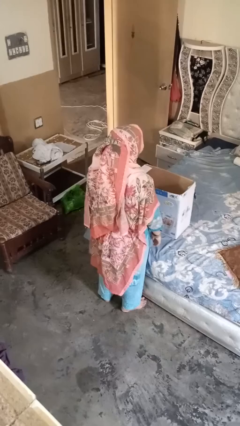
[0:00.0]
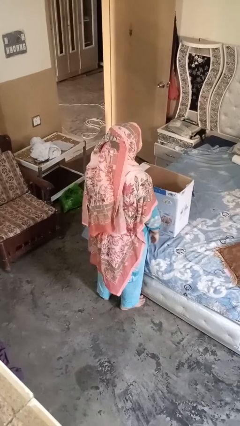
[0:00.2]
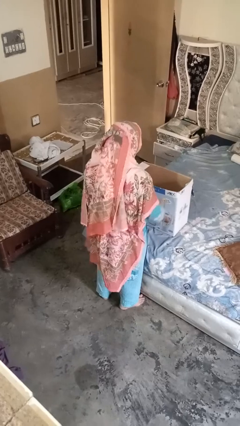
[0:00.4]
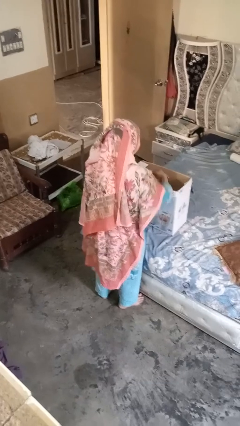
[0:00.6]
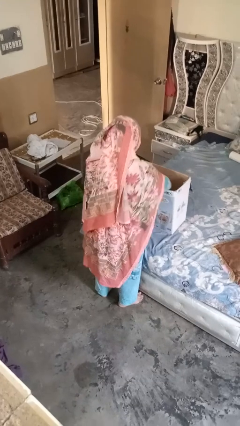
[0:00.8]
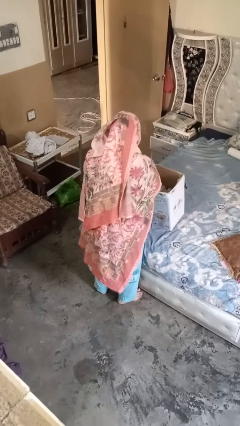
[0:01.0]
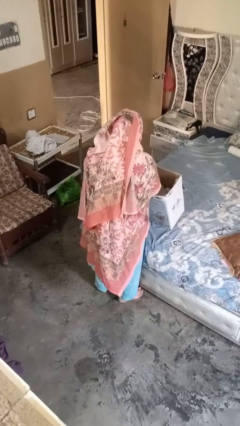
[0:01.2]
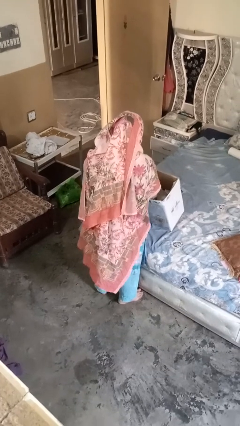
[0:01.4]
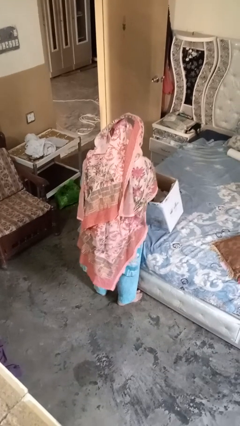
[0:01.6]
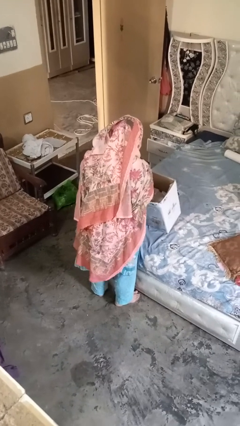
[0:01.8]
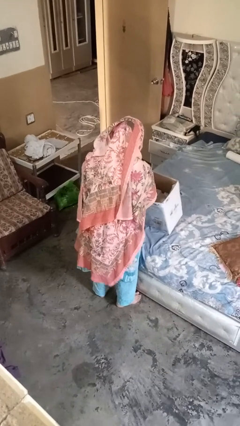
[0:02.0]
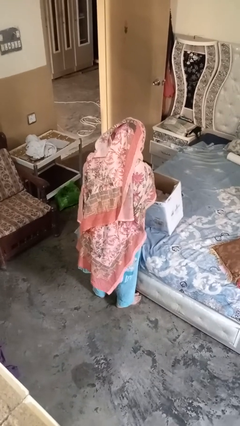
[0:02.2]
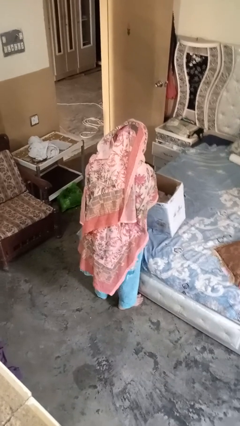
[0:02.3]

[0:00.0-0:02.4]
person searches in box

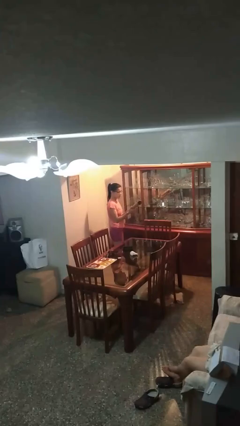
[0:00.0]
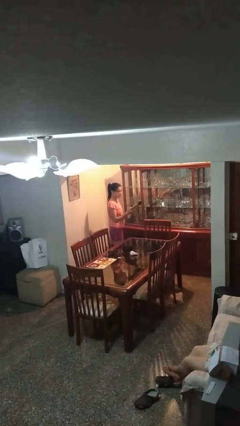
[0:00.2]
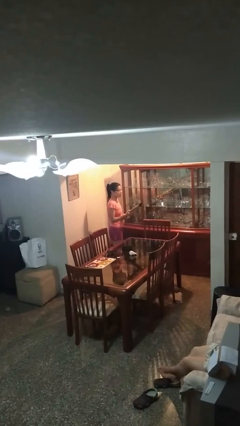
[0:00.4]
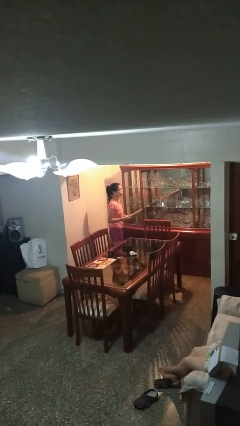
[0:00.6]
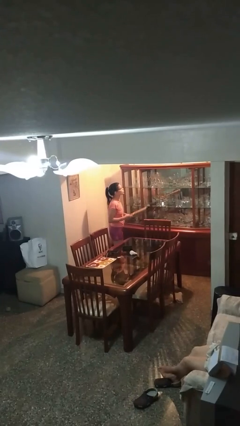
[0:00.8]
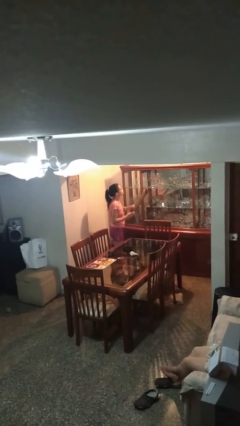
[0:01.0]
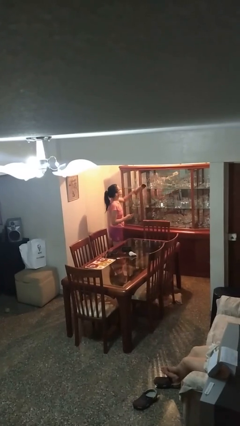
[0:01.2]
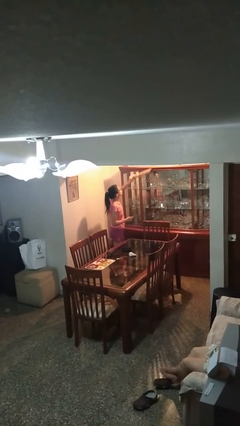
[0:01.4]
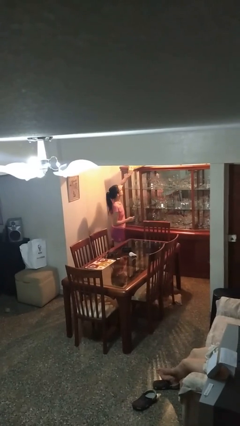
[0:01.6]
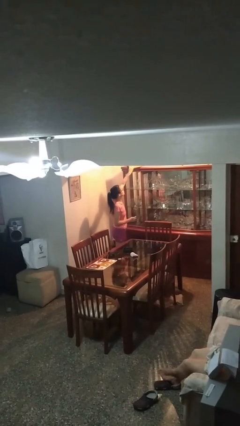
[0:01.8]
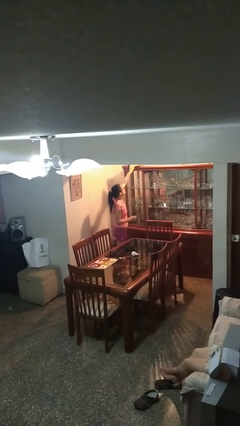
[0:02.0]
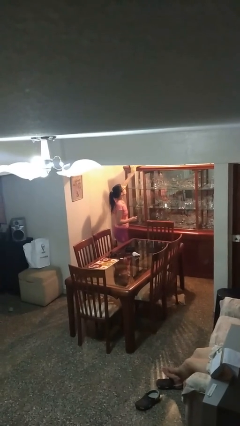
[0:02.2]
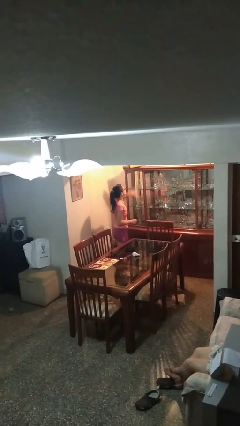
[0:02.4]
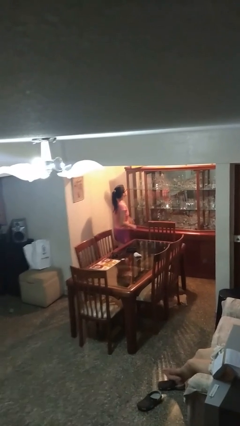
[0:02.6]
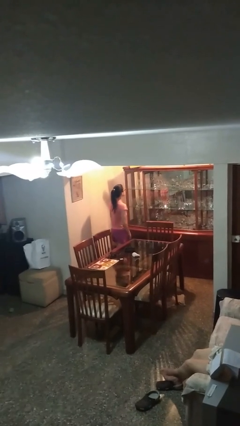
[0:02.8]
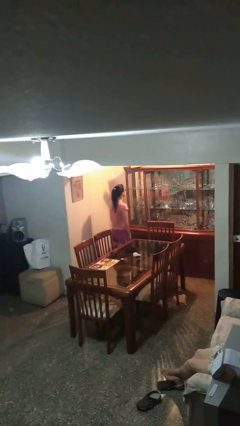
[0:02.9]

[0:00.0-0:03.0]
person puts down object on shelf

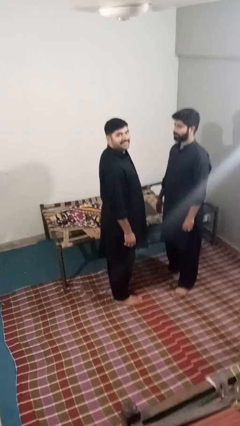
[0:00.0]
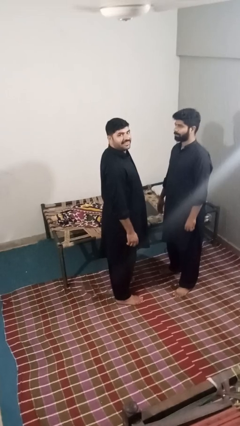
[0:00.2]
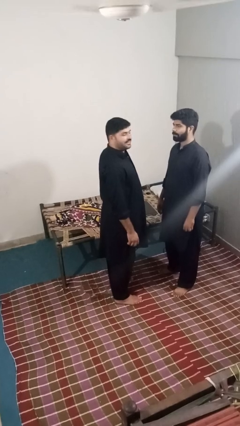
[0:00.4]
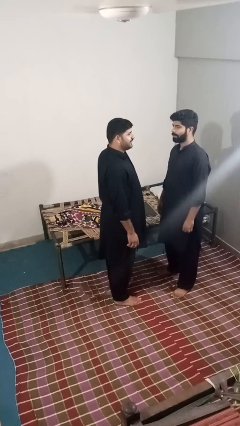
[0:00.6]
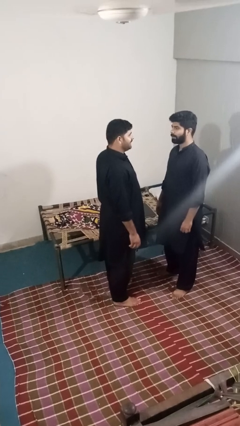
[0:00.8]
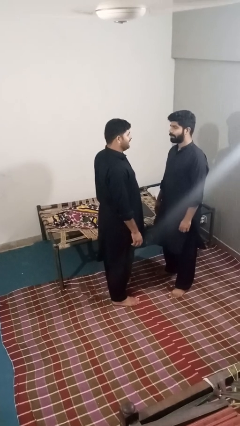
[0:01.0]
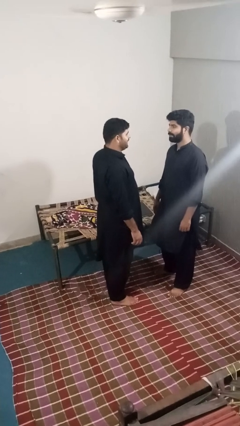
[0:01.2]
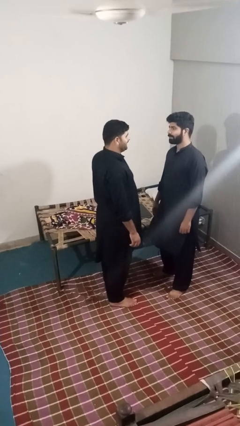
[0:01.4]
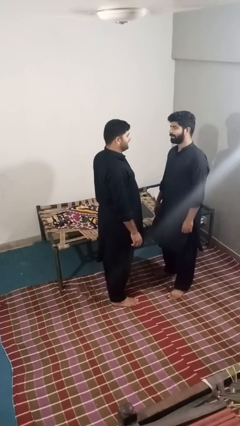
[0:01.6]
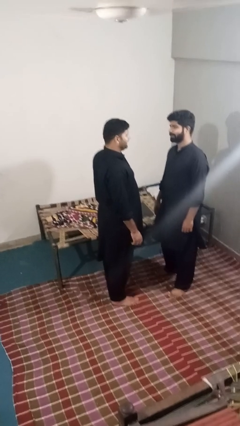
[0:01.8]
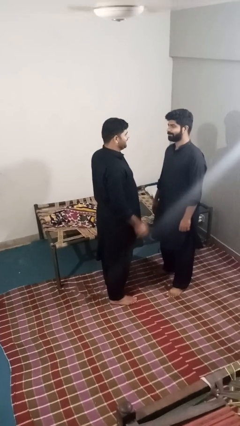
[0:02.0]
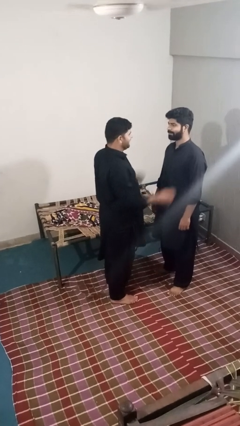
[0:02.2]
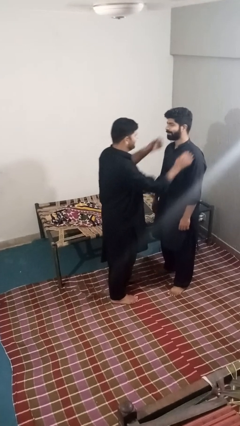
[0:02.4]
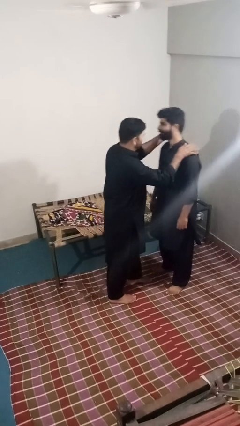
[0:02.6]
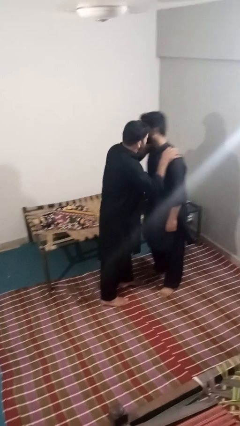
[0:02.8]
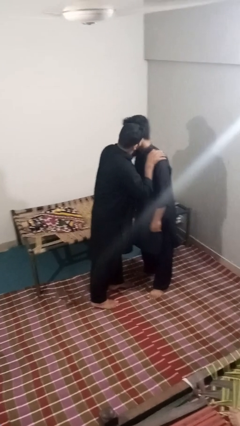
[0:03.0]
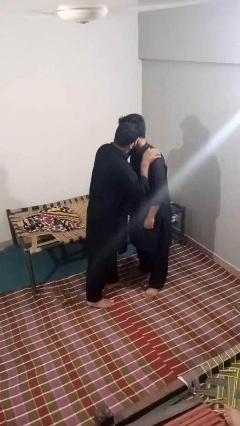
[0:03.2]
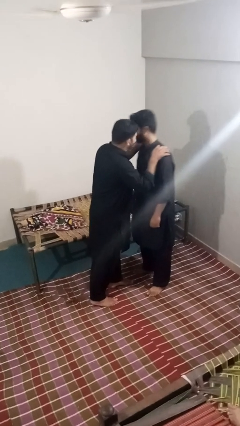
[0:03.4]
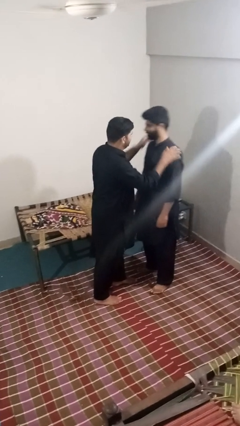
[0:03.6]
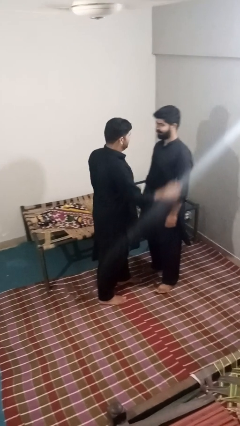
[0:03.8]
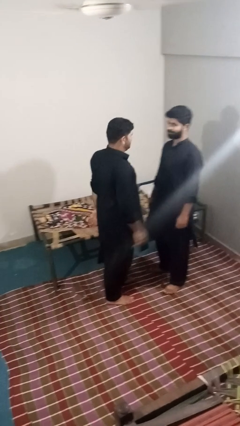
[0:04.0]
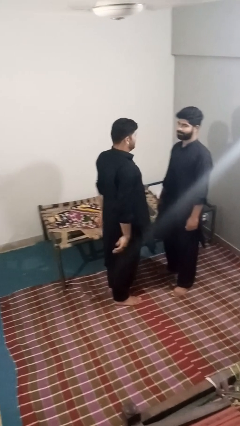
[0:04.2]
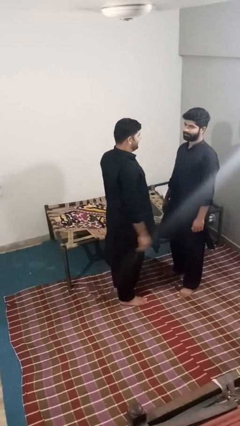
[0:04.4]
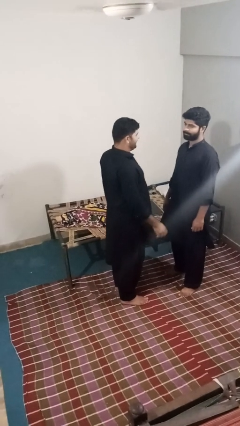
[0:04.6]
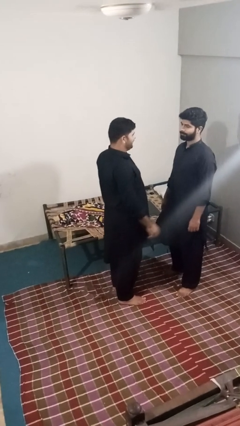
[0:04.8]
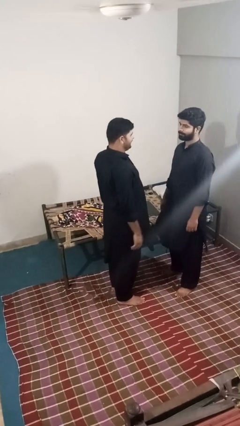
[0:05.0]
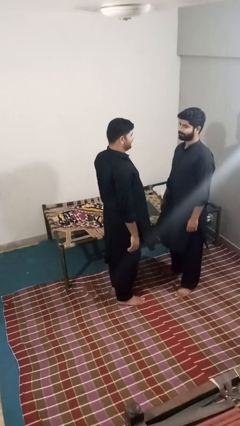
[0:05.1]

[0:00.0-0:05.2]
person kisses cheek of person

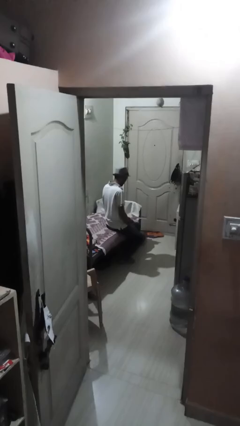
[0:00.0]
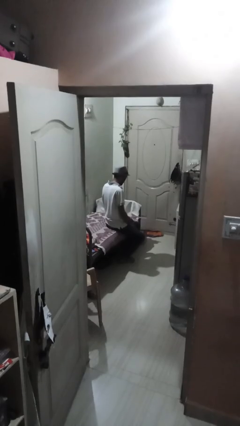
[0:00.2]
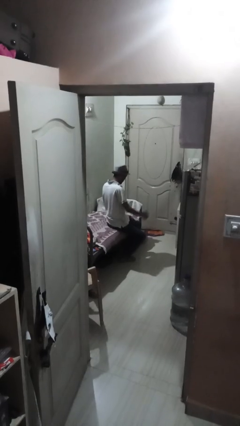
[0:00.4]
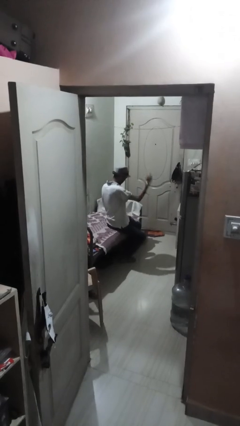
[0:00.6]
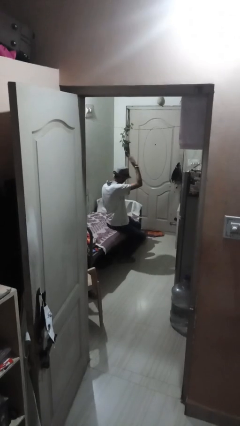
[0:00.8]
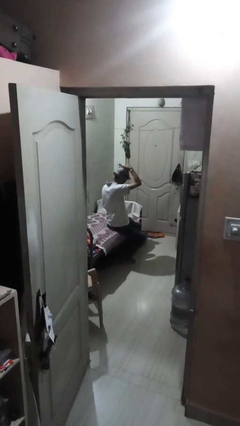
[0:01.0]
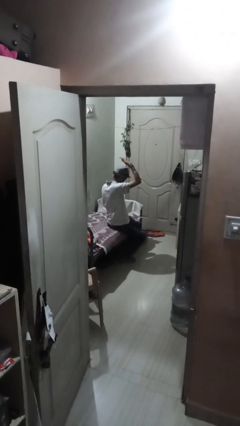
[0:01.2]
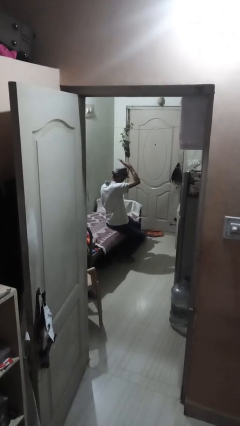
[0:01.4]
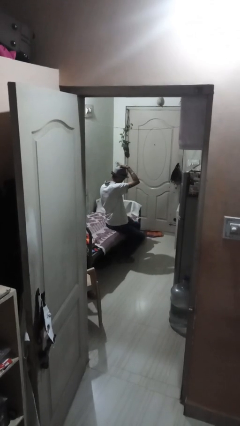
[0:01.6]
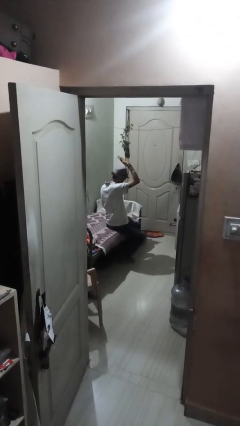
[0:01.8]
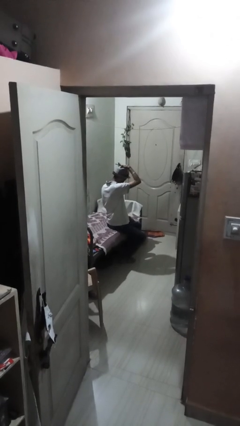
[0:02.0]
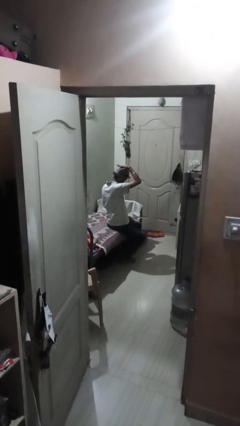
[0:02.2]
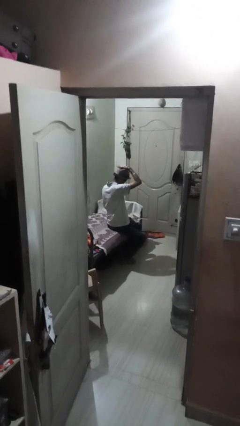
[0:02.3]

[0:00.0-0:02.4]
person pats head

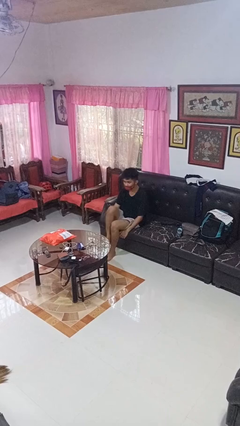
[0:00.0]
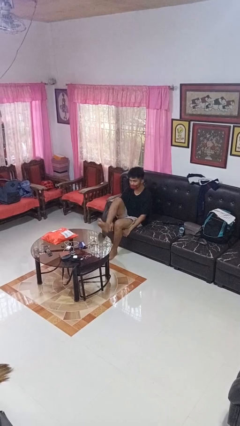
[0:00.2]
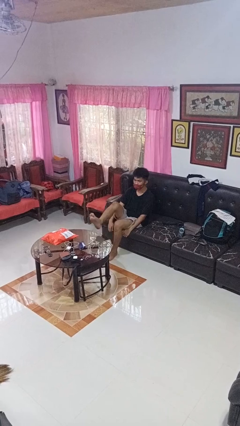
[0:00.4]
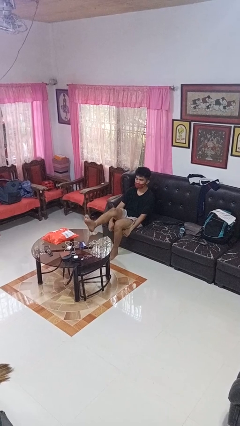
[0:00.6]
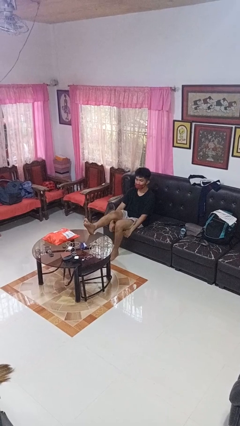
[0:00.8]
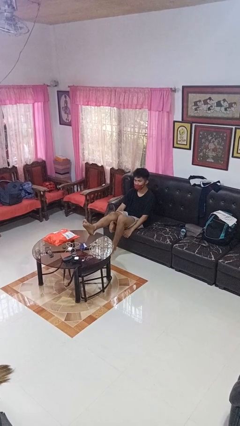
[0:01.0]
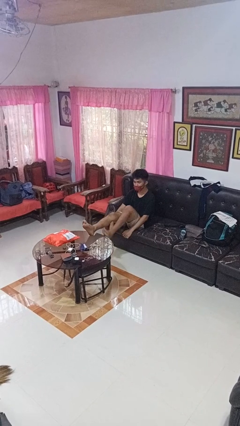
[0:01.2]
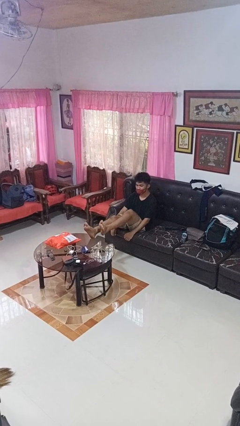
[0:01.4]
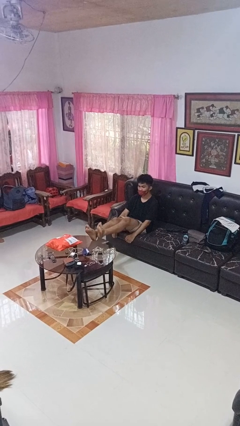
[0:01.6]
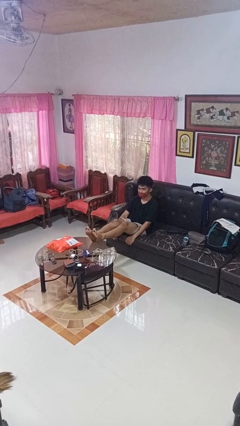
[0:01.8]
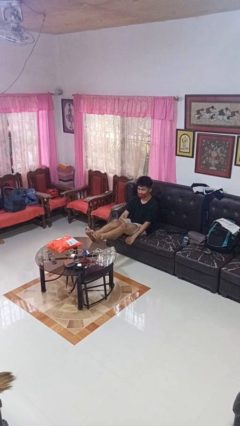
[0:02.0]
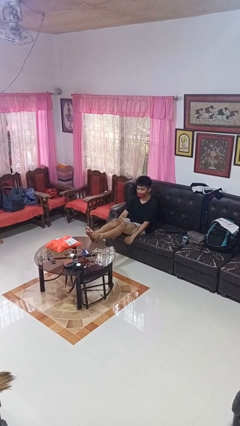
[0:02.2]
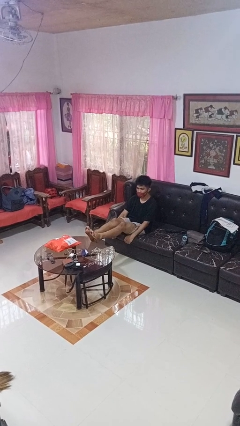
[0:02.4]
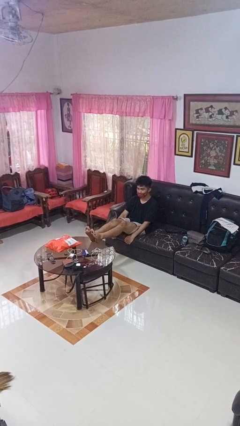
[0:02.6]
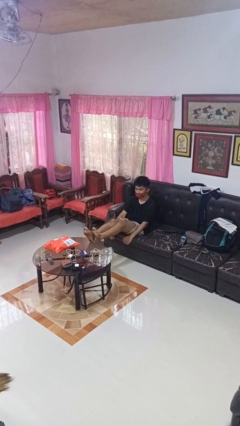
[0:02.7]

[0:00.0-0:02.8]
person puts feet up

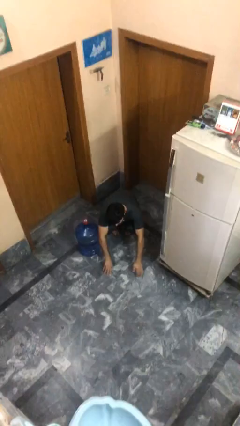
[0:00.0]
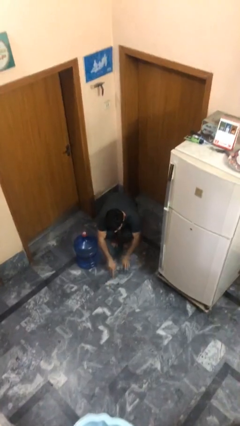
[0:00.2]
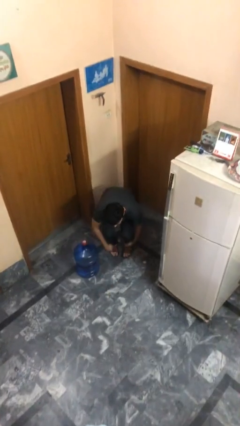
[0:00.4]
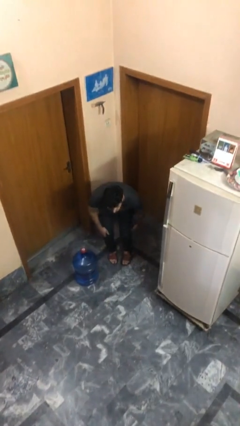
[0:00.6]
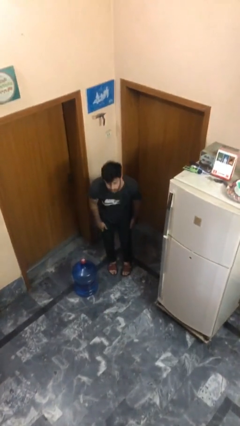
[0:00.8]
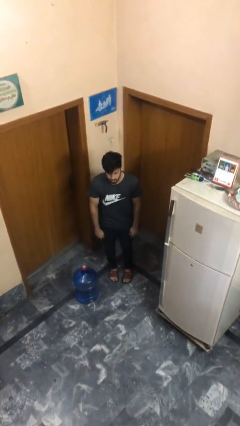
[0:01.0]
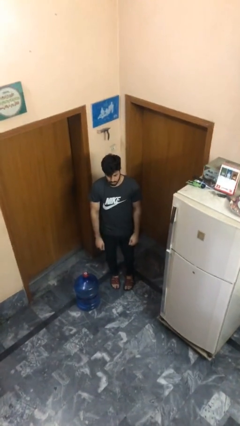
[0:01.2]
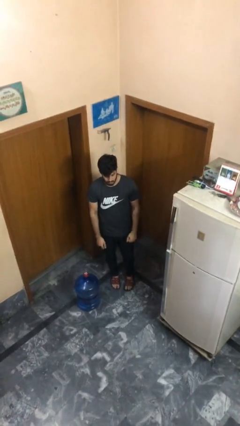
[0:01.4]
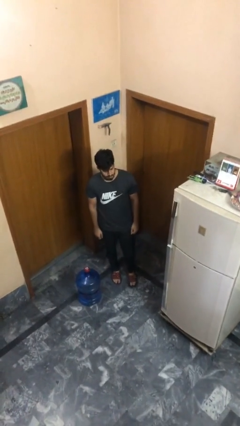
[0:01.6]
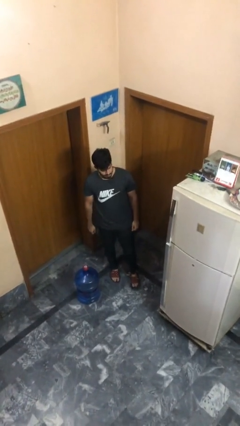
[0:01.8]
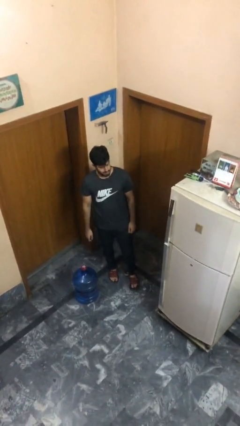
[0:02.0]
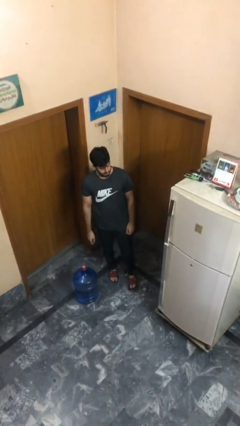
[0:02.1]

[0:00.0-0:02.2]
person stands up from floor
